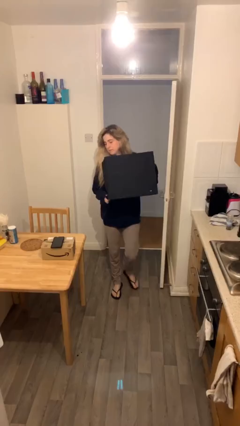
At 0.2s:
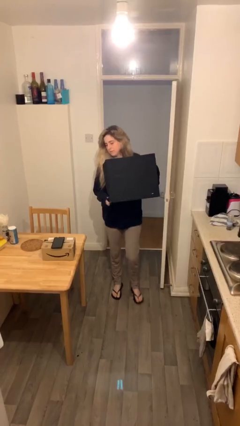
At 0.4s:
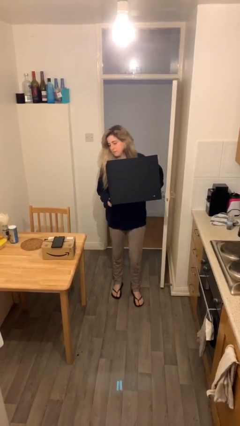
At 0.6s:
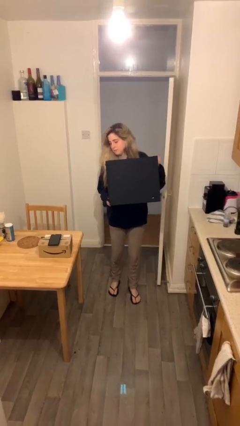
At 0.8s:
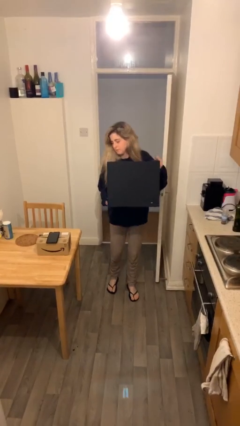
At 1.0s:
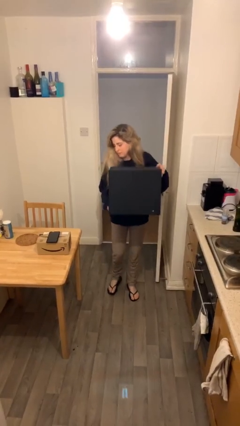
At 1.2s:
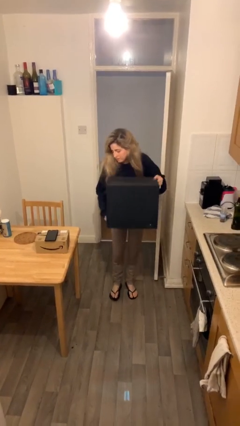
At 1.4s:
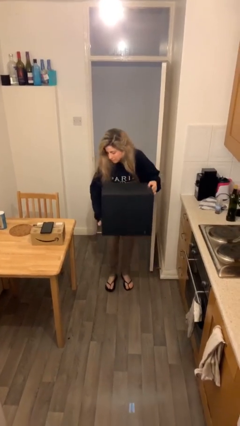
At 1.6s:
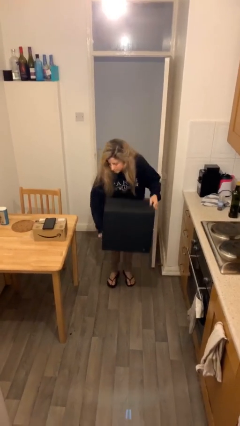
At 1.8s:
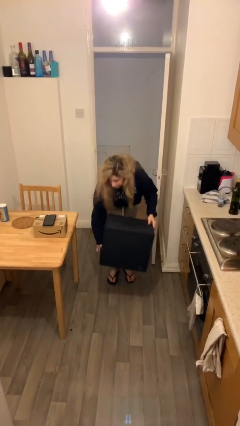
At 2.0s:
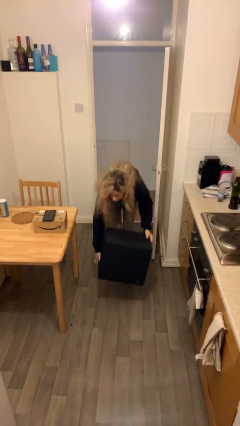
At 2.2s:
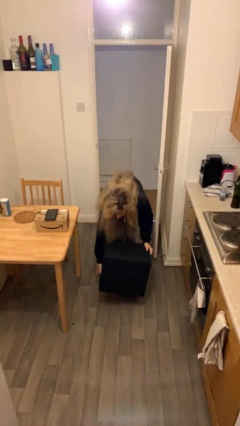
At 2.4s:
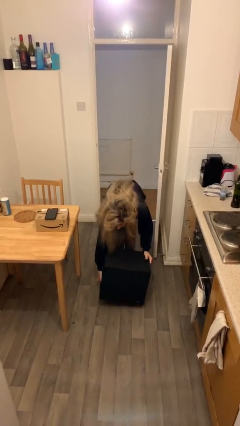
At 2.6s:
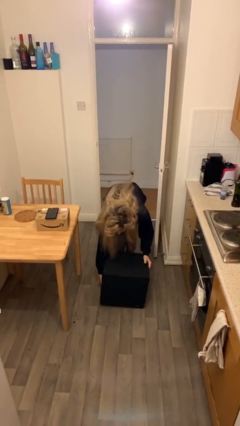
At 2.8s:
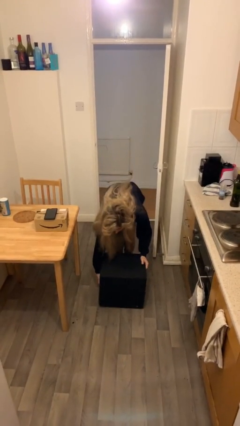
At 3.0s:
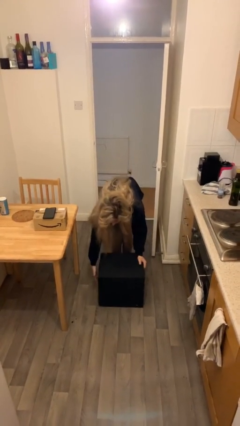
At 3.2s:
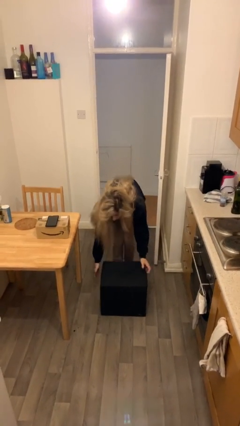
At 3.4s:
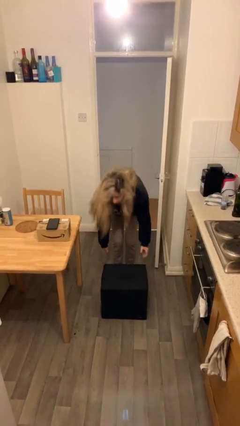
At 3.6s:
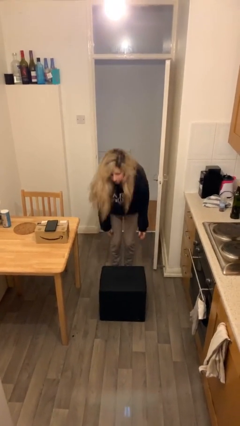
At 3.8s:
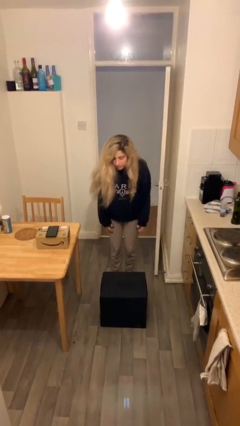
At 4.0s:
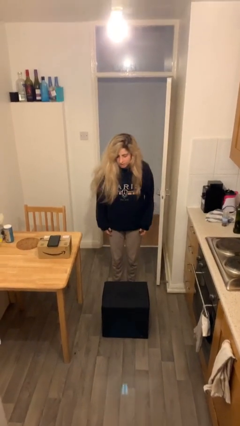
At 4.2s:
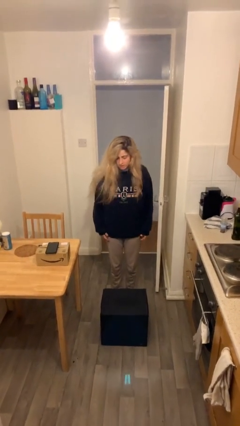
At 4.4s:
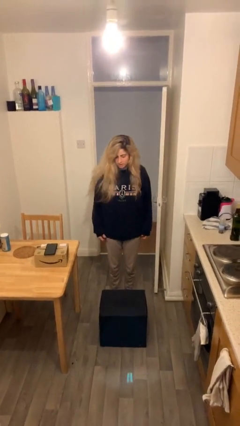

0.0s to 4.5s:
person puts down object on floor

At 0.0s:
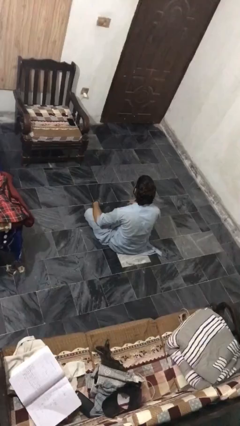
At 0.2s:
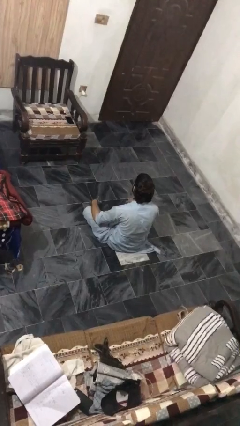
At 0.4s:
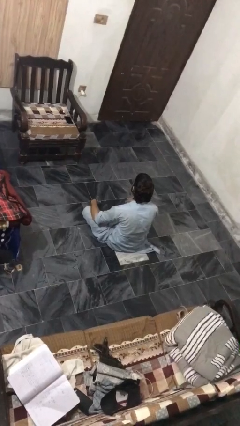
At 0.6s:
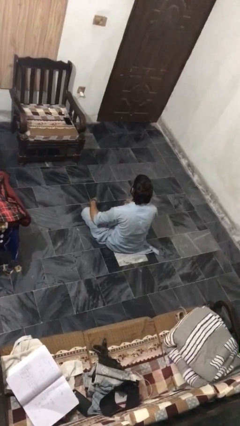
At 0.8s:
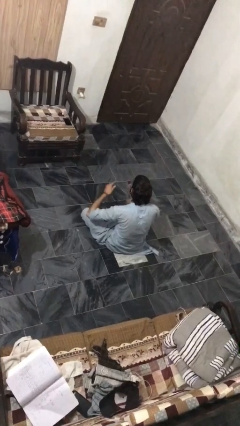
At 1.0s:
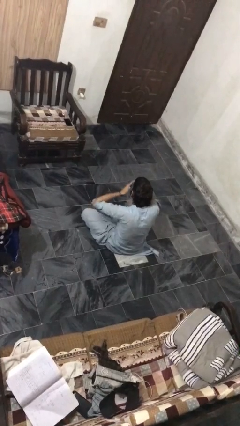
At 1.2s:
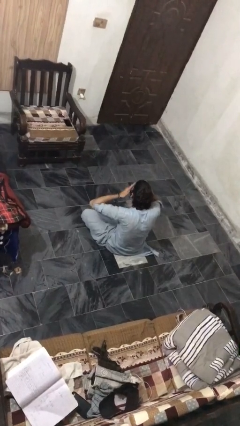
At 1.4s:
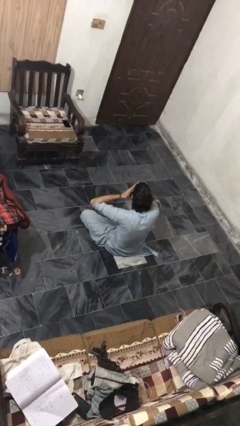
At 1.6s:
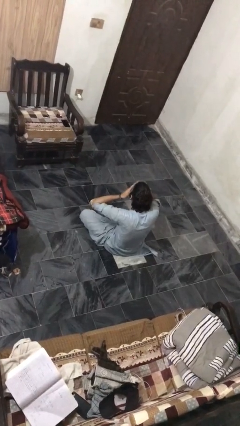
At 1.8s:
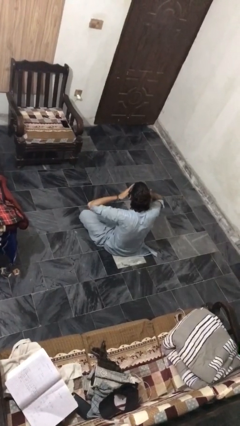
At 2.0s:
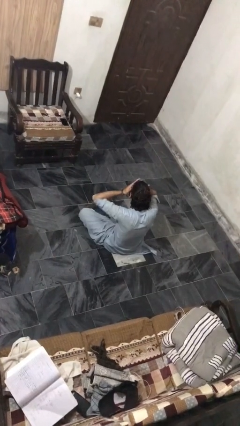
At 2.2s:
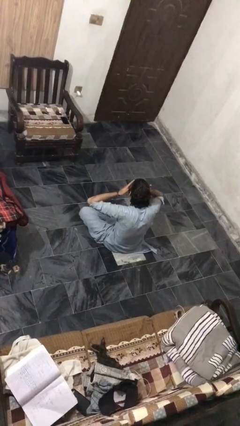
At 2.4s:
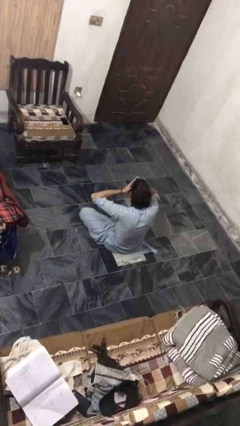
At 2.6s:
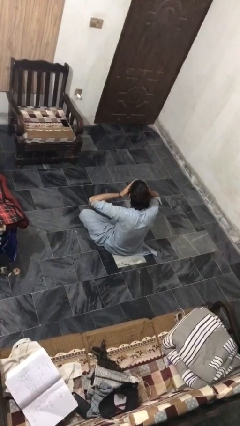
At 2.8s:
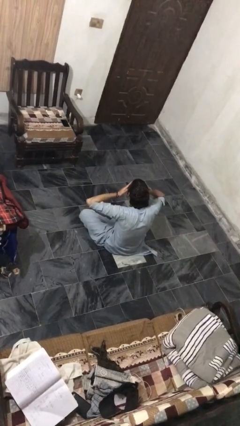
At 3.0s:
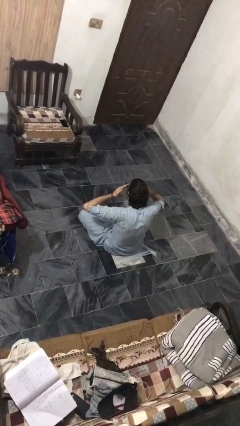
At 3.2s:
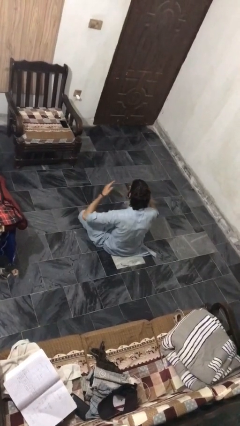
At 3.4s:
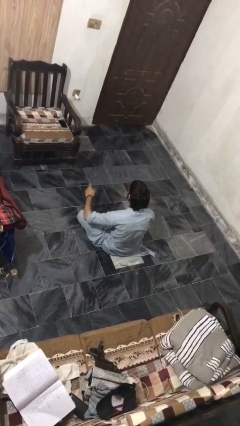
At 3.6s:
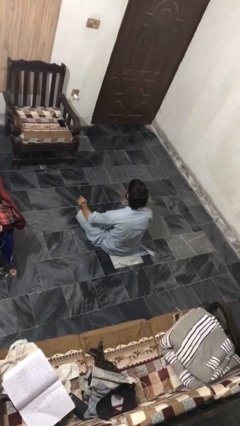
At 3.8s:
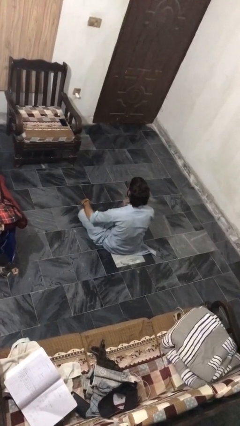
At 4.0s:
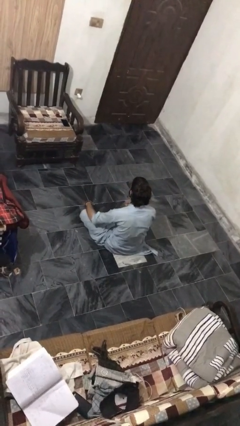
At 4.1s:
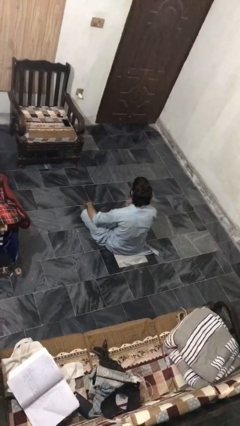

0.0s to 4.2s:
person rubs eyes

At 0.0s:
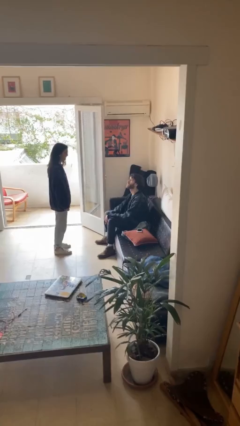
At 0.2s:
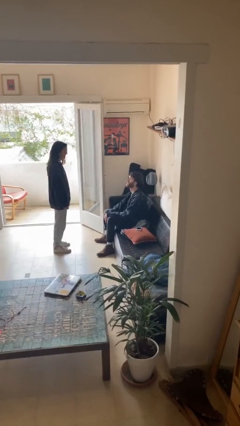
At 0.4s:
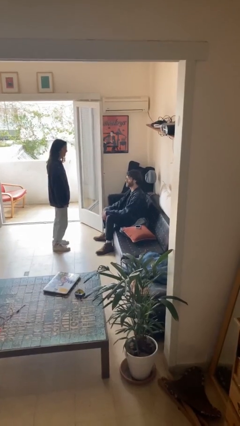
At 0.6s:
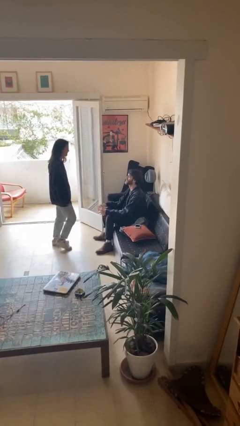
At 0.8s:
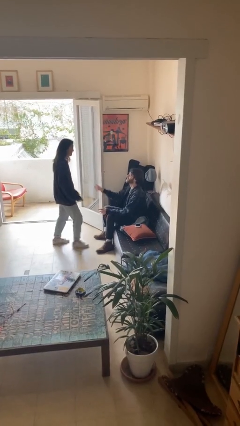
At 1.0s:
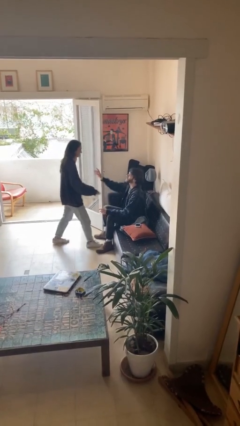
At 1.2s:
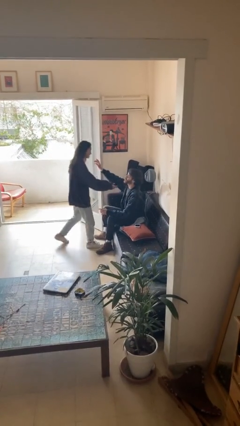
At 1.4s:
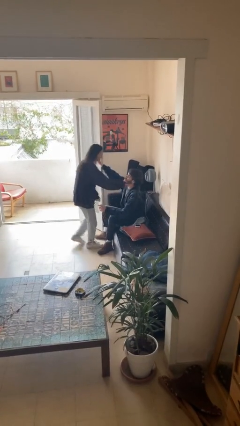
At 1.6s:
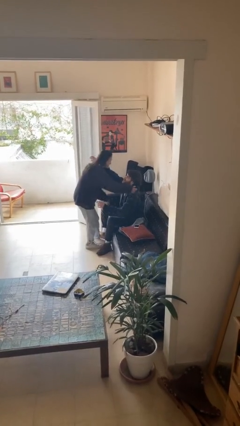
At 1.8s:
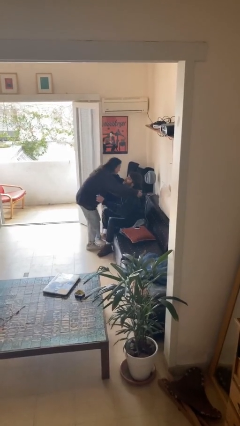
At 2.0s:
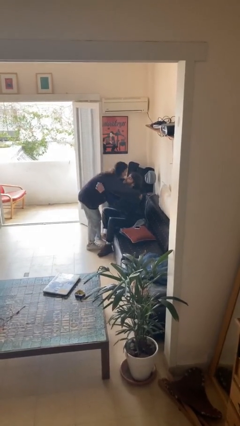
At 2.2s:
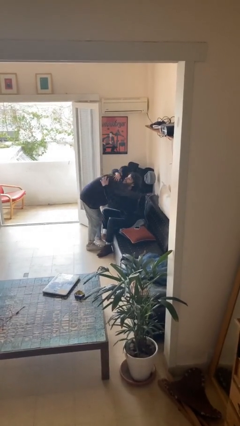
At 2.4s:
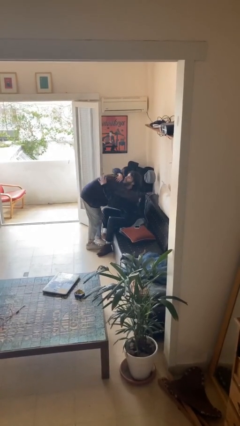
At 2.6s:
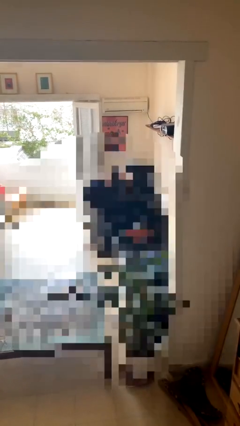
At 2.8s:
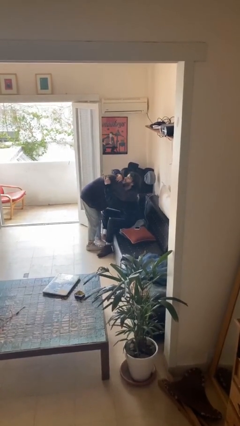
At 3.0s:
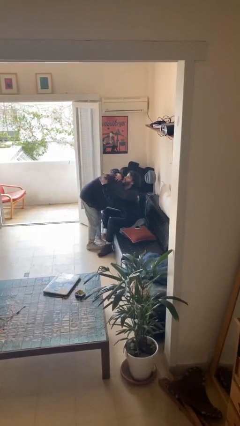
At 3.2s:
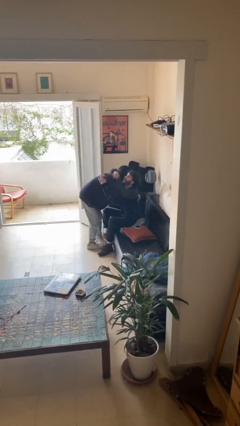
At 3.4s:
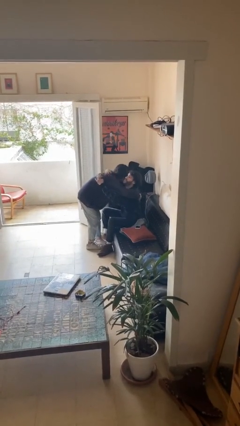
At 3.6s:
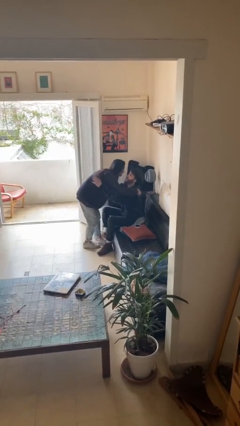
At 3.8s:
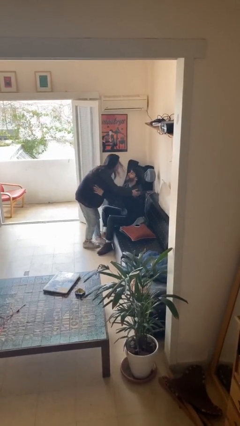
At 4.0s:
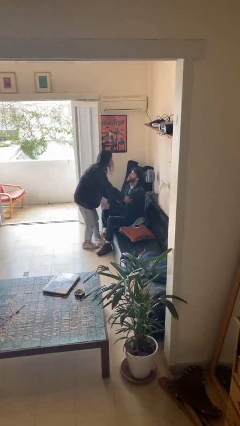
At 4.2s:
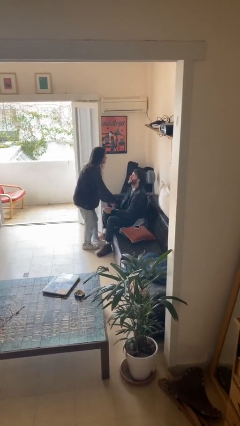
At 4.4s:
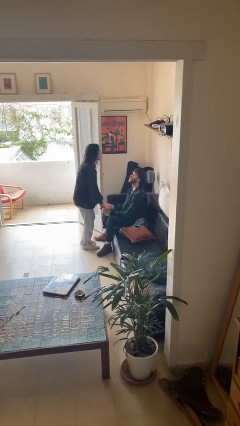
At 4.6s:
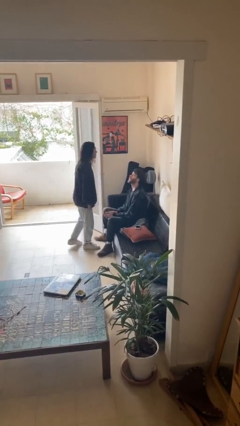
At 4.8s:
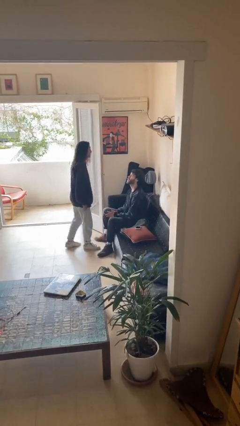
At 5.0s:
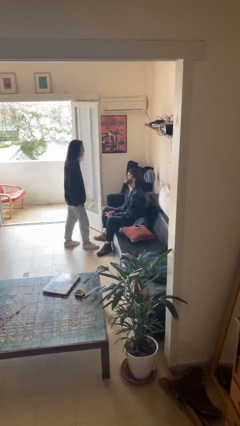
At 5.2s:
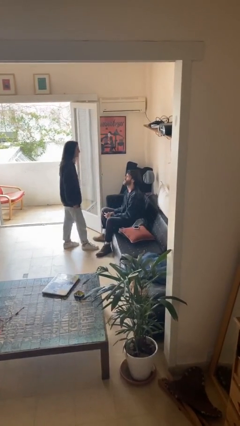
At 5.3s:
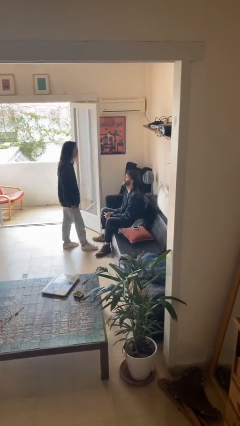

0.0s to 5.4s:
person embraces person

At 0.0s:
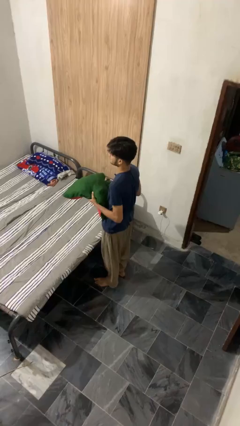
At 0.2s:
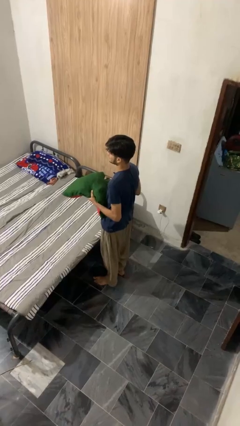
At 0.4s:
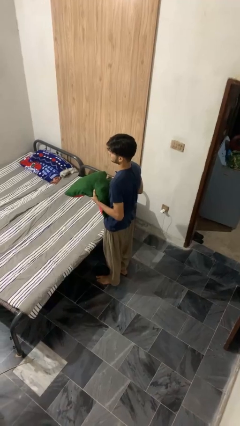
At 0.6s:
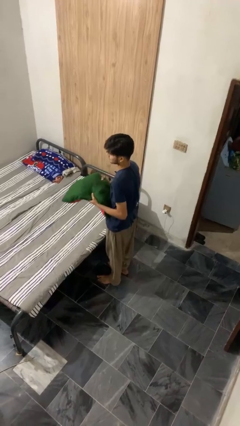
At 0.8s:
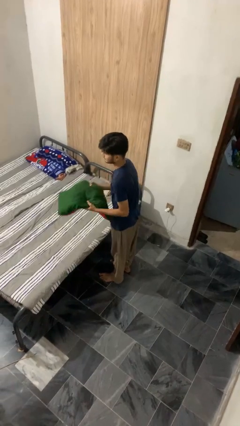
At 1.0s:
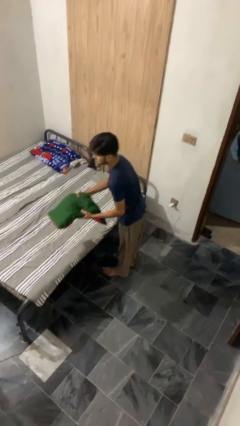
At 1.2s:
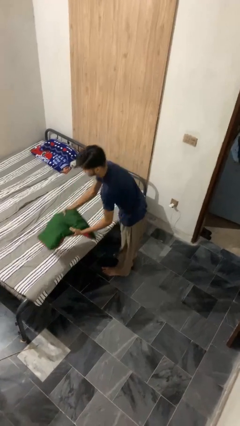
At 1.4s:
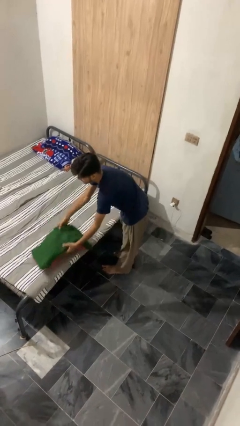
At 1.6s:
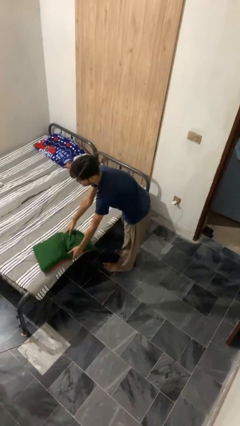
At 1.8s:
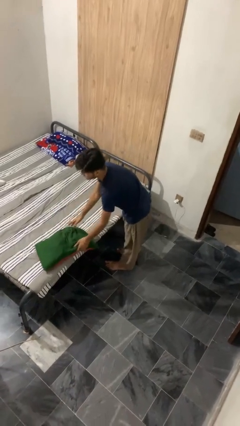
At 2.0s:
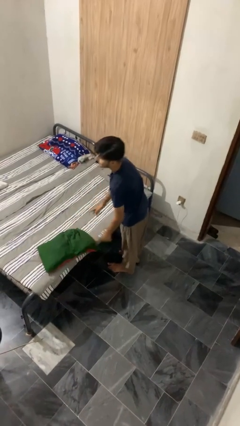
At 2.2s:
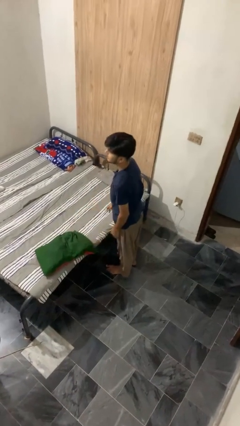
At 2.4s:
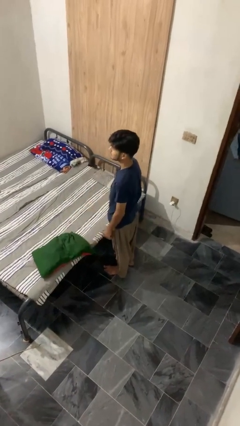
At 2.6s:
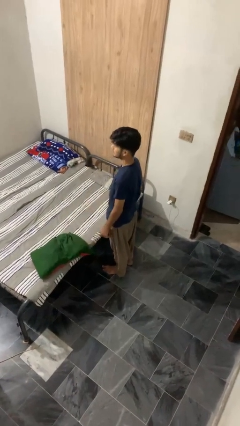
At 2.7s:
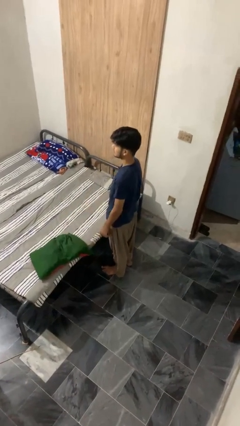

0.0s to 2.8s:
person puts down object on bed

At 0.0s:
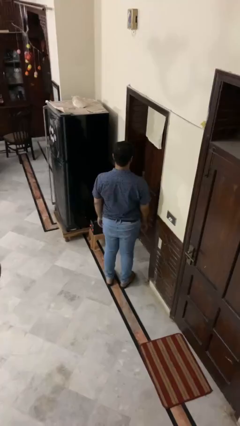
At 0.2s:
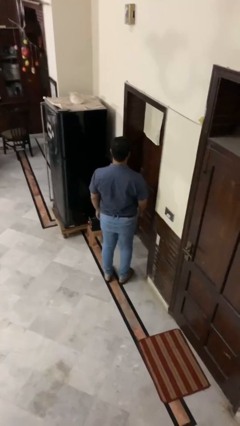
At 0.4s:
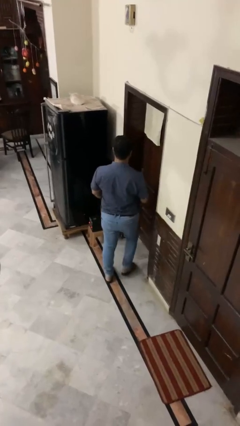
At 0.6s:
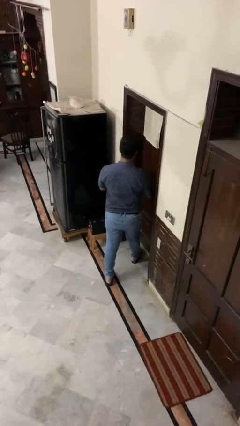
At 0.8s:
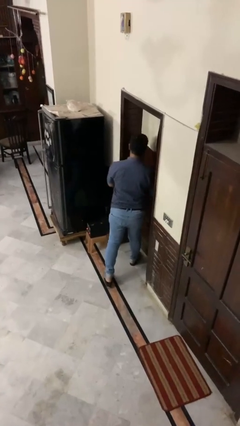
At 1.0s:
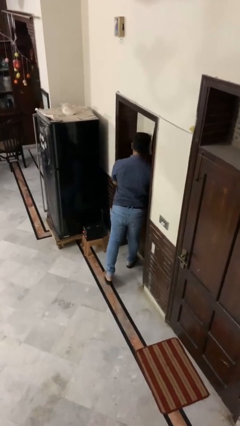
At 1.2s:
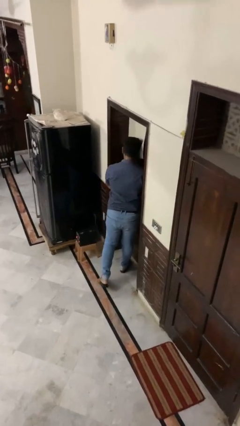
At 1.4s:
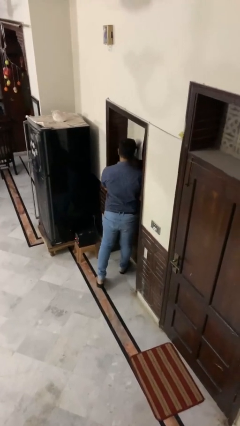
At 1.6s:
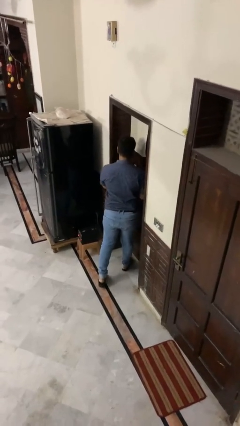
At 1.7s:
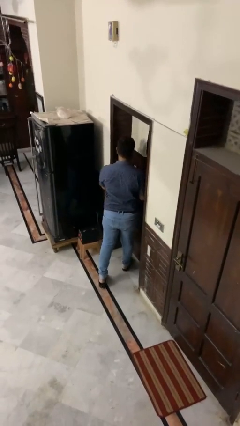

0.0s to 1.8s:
person bumps into wall
